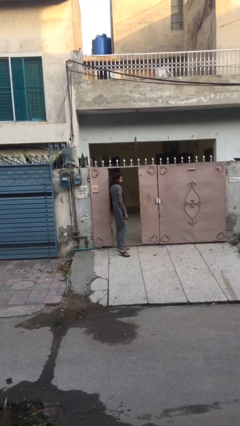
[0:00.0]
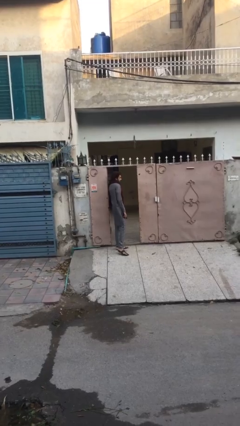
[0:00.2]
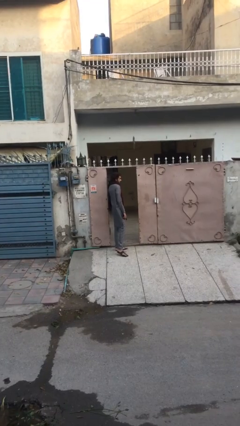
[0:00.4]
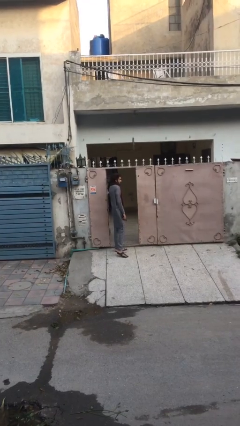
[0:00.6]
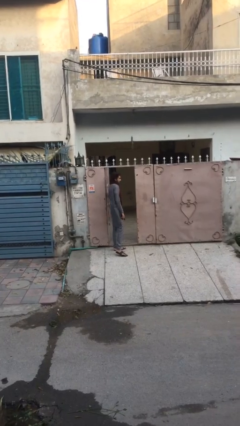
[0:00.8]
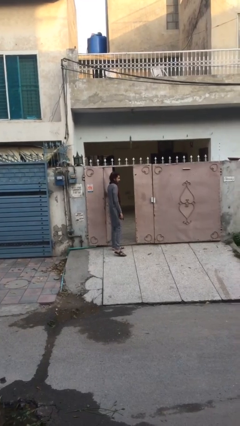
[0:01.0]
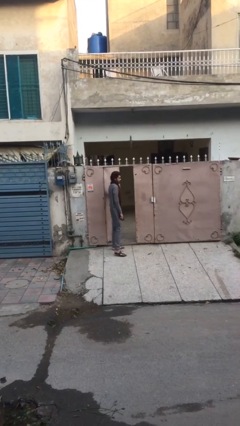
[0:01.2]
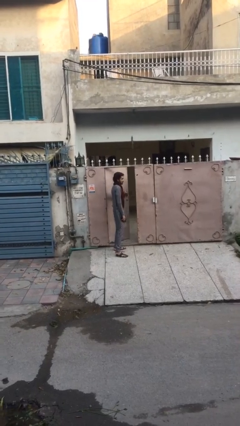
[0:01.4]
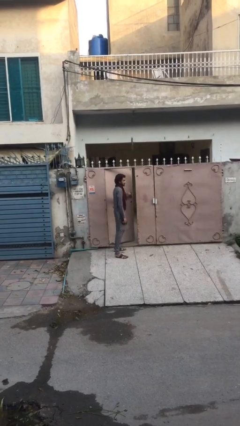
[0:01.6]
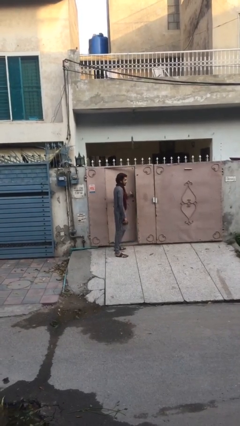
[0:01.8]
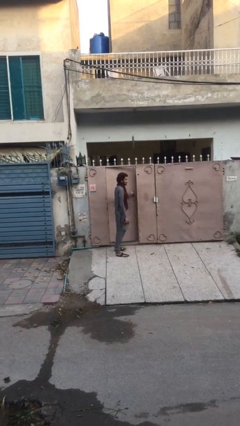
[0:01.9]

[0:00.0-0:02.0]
person closes facility door

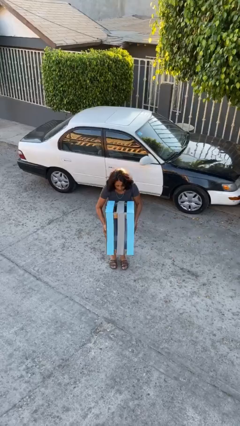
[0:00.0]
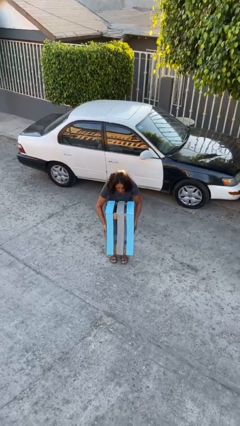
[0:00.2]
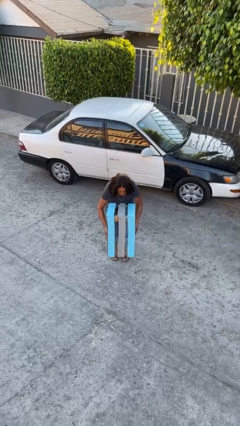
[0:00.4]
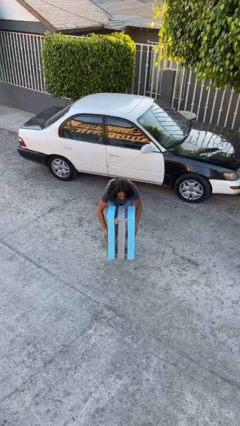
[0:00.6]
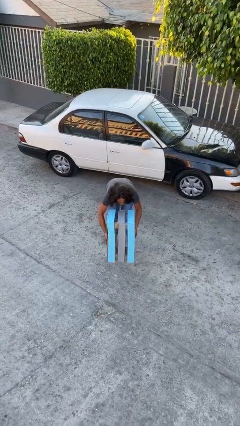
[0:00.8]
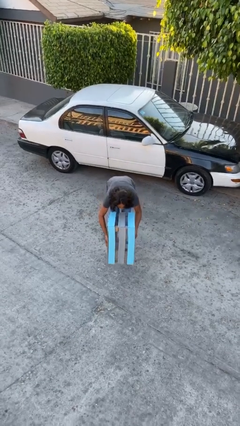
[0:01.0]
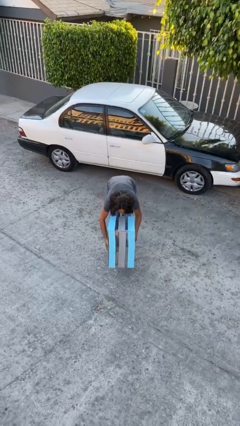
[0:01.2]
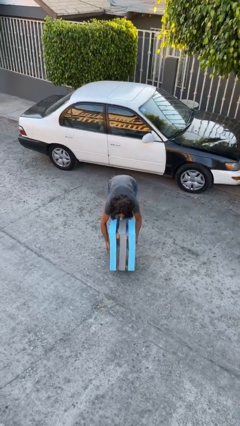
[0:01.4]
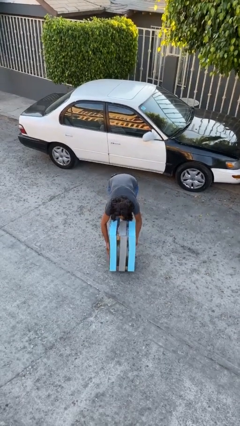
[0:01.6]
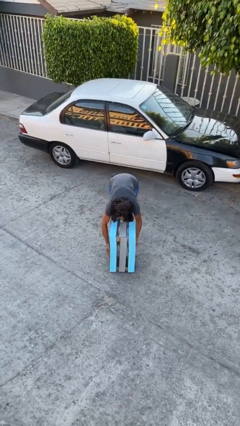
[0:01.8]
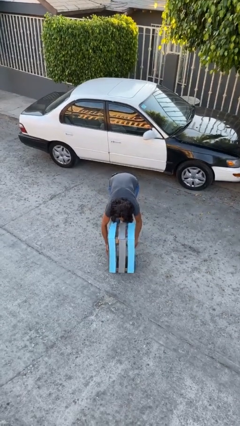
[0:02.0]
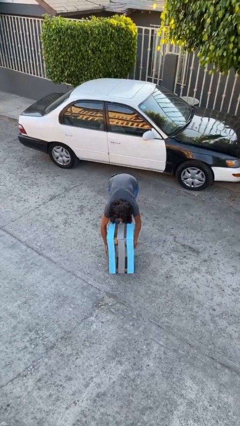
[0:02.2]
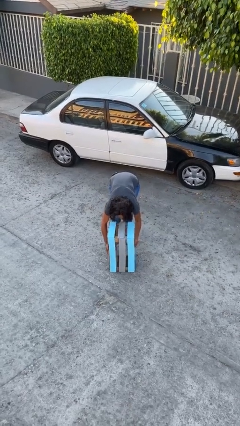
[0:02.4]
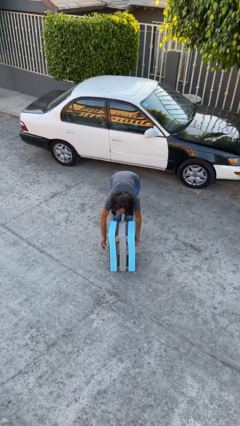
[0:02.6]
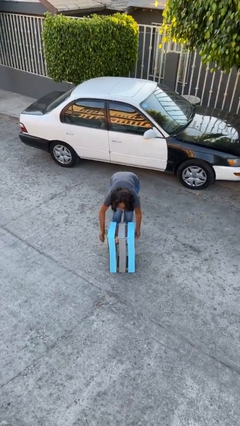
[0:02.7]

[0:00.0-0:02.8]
person puts down object on floor

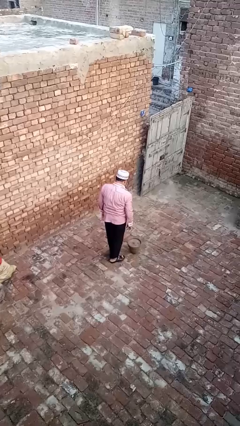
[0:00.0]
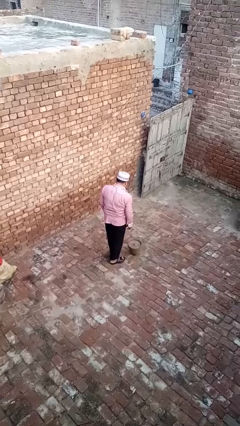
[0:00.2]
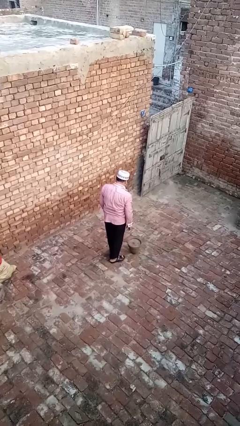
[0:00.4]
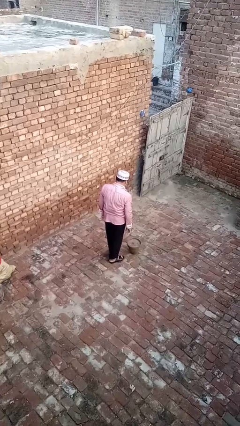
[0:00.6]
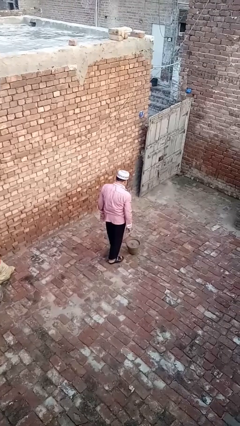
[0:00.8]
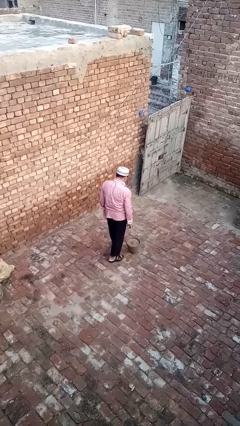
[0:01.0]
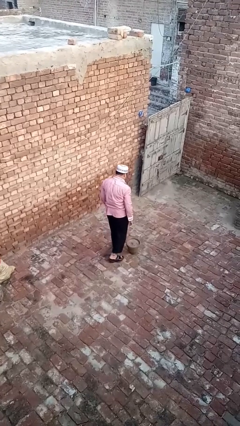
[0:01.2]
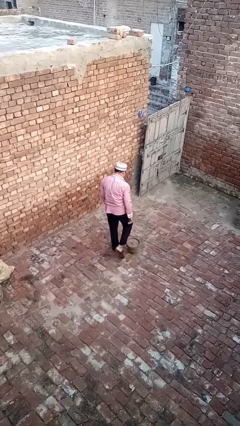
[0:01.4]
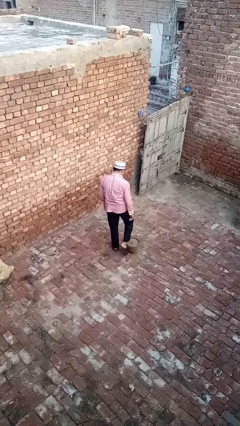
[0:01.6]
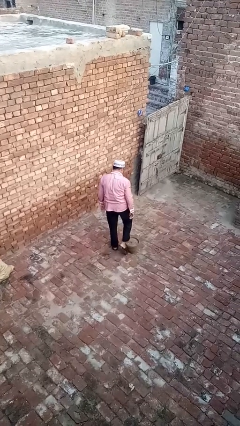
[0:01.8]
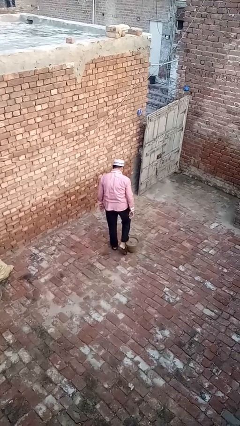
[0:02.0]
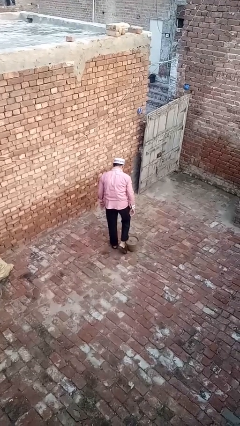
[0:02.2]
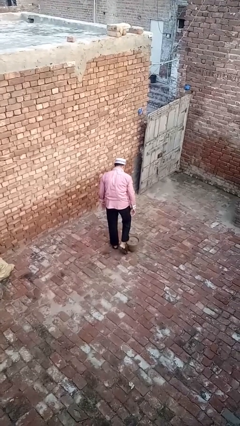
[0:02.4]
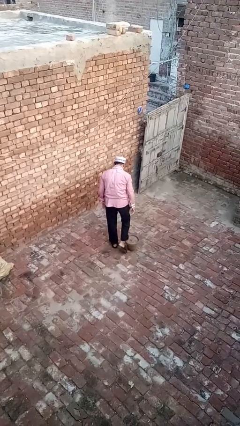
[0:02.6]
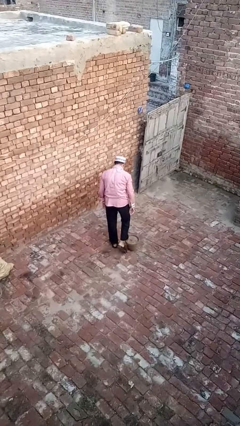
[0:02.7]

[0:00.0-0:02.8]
person trips on object on floor

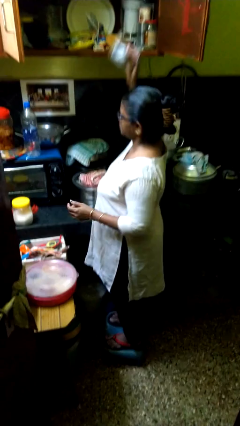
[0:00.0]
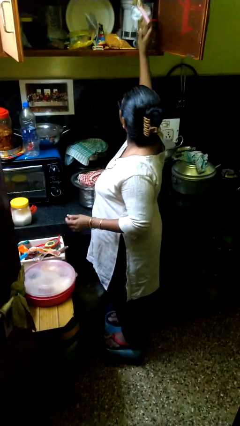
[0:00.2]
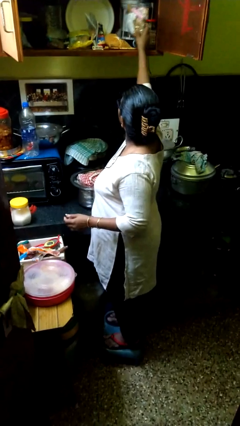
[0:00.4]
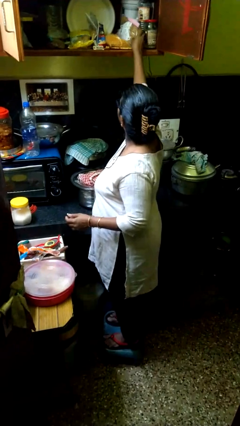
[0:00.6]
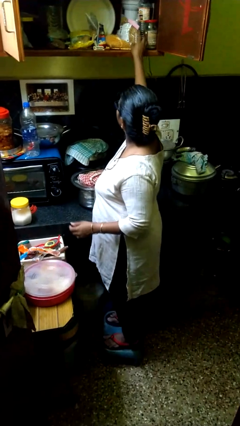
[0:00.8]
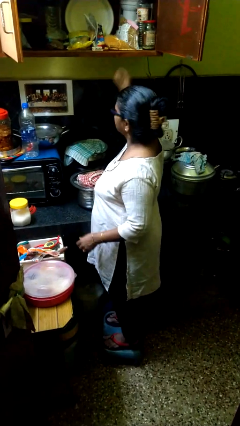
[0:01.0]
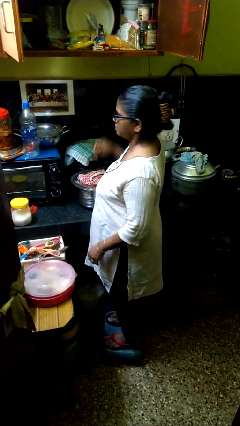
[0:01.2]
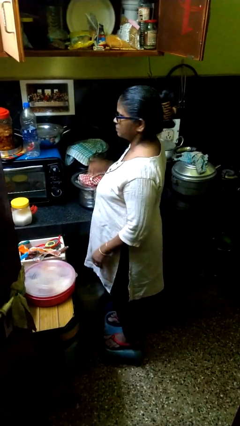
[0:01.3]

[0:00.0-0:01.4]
person puts object in cabinet

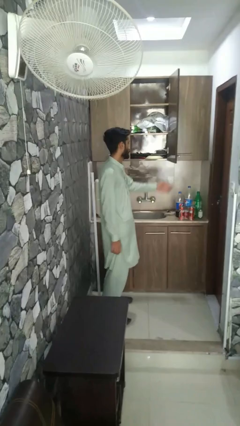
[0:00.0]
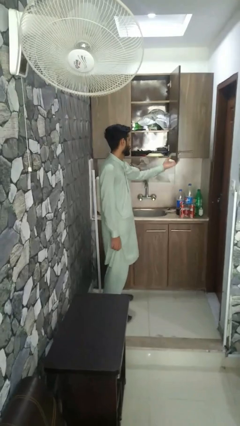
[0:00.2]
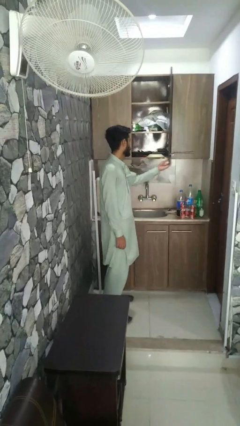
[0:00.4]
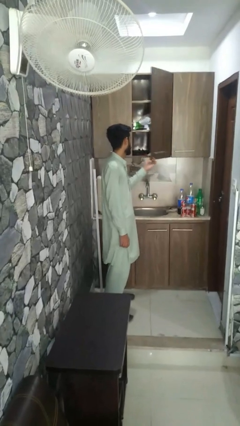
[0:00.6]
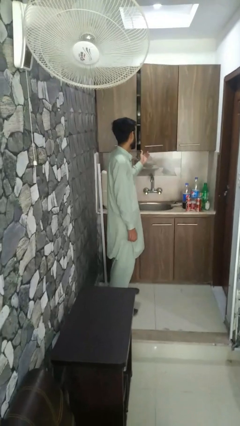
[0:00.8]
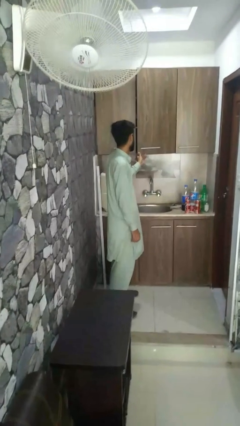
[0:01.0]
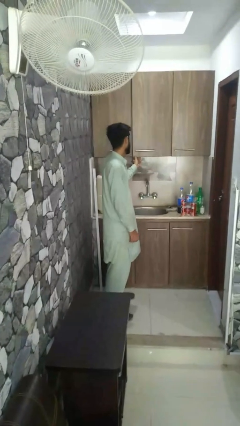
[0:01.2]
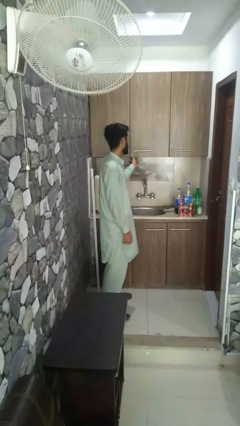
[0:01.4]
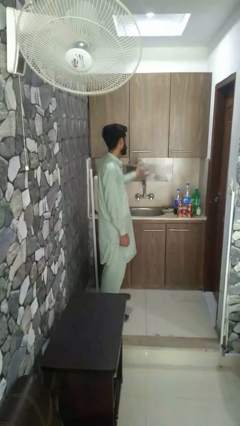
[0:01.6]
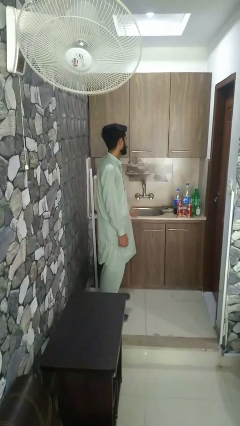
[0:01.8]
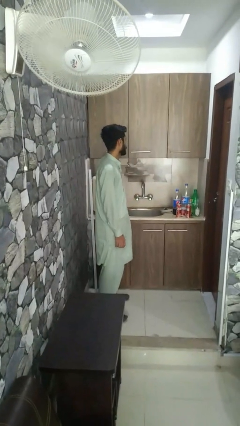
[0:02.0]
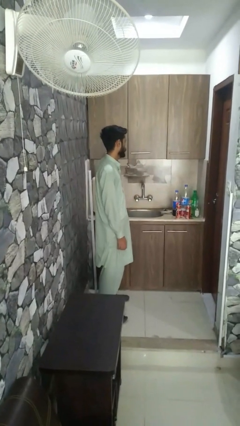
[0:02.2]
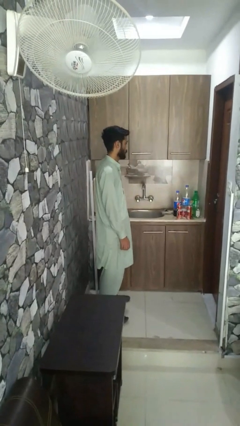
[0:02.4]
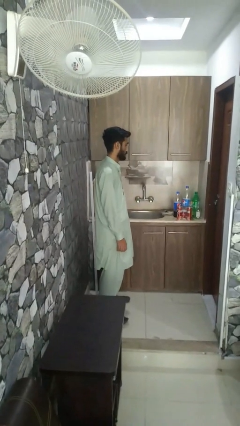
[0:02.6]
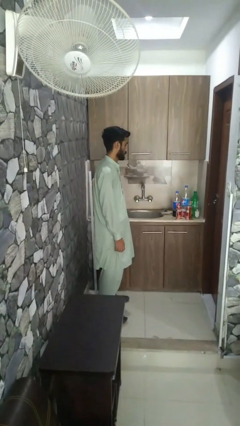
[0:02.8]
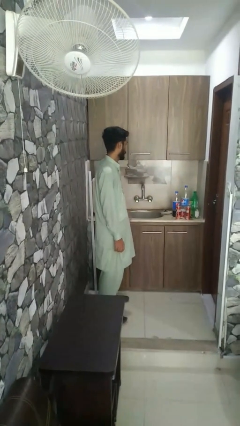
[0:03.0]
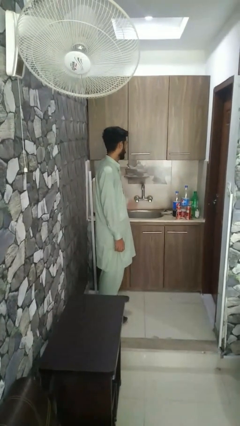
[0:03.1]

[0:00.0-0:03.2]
person closes closet door

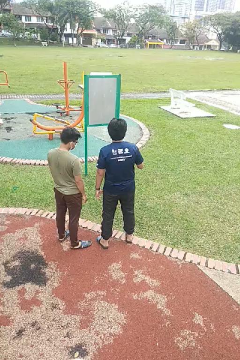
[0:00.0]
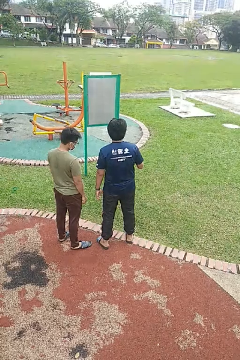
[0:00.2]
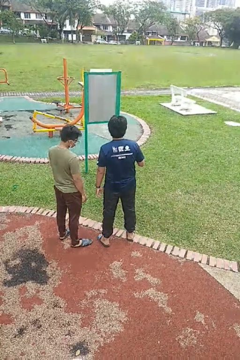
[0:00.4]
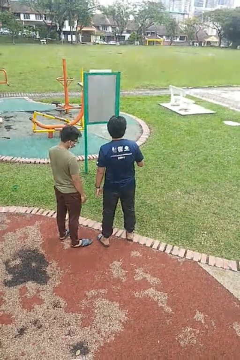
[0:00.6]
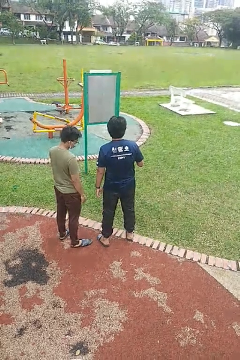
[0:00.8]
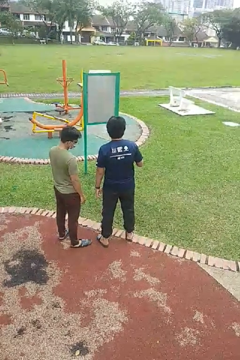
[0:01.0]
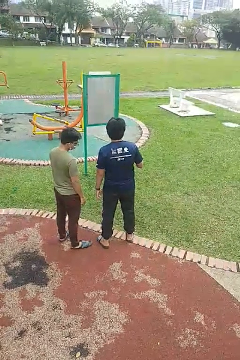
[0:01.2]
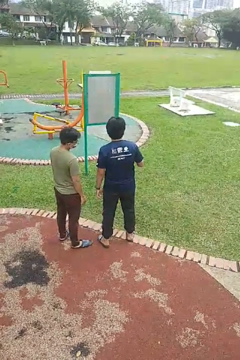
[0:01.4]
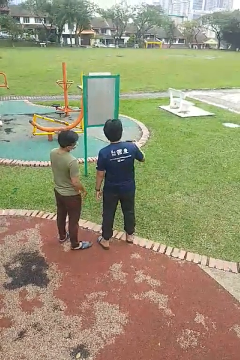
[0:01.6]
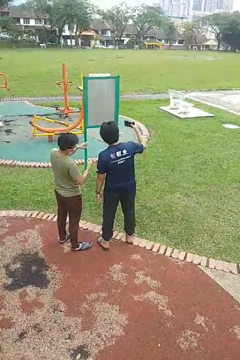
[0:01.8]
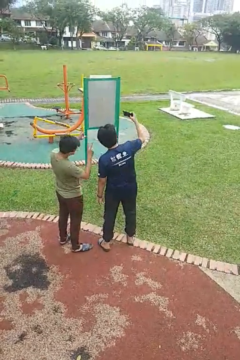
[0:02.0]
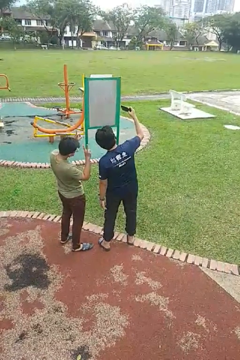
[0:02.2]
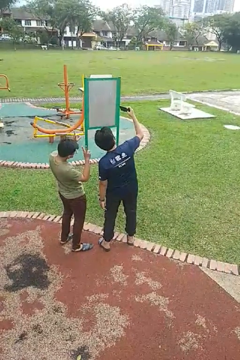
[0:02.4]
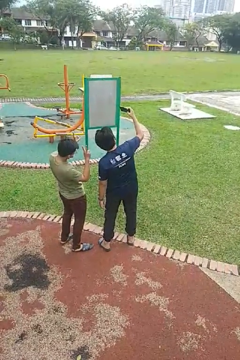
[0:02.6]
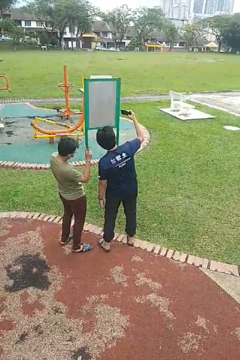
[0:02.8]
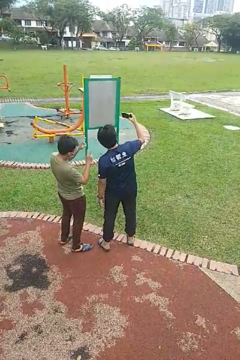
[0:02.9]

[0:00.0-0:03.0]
person takes selfie with person

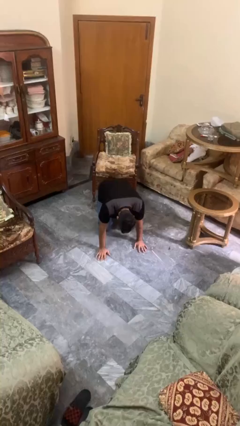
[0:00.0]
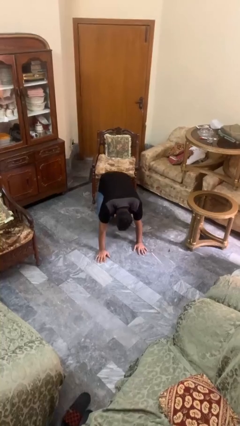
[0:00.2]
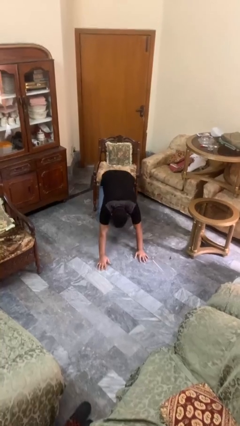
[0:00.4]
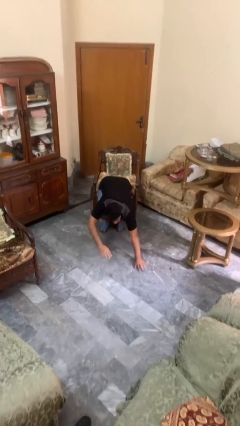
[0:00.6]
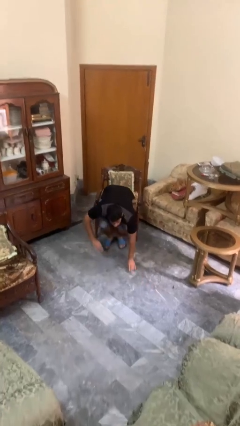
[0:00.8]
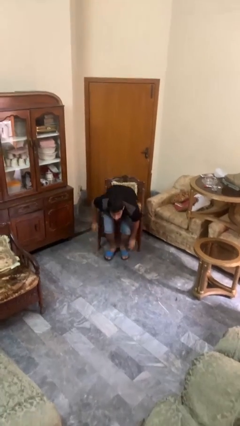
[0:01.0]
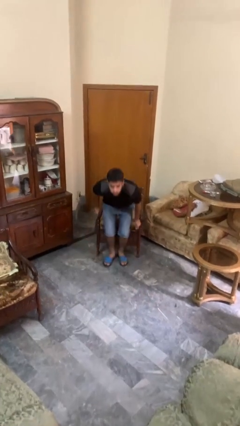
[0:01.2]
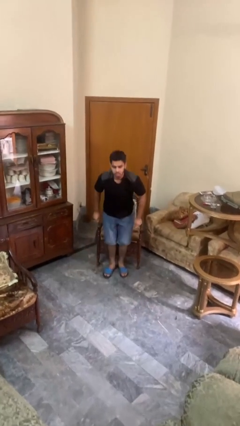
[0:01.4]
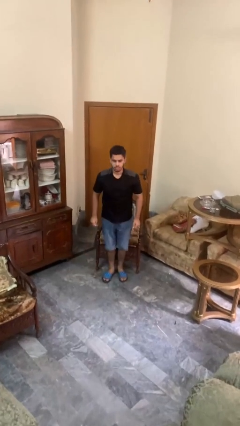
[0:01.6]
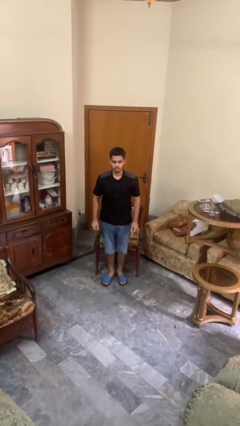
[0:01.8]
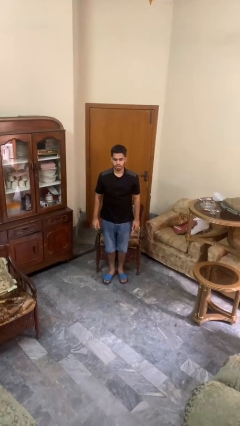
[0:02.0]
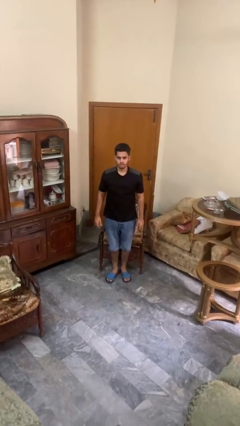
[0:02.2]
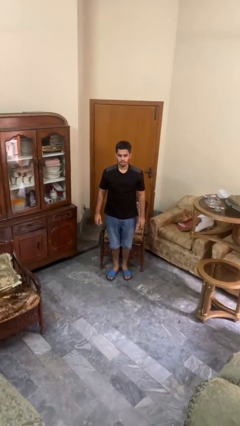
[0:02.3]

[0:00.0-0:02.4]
person stands up from floor

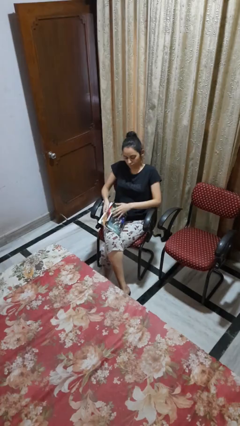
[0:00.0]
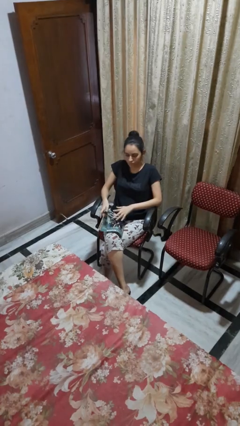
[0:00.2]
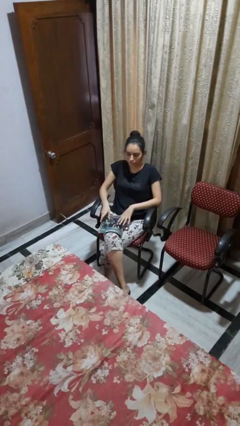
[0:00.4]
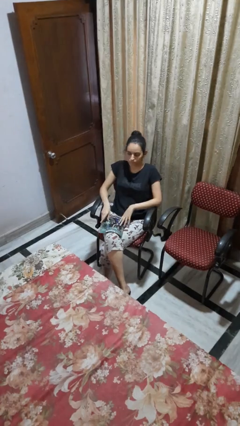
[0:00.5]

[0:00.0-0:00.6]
person reads magazine
